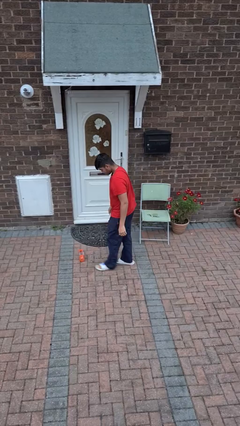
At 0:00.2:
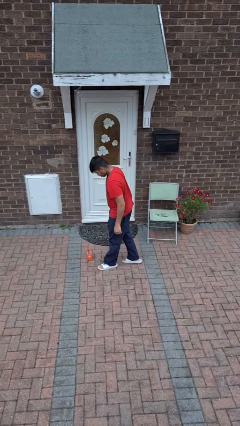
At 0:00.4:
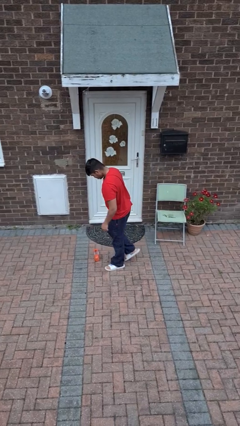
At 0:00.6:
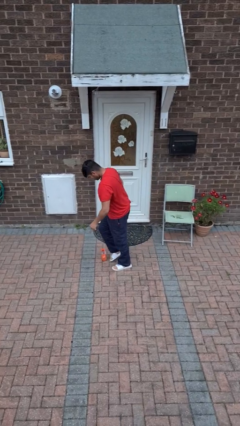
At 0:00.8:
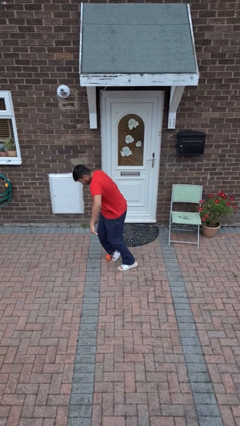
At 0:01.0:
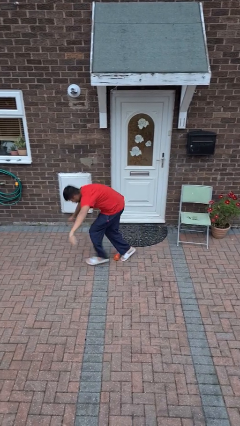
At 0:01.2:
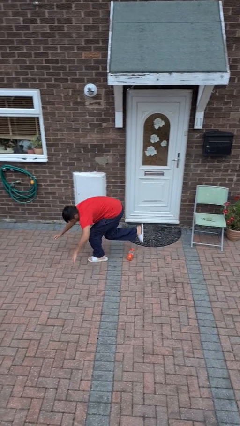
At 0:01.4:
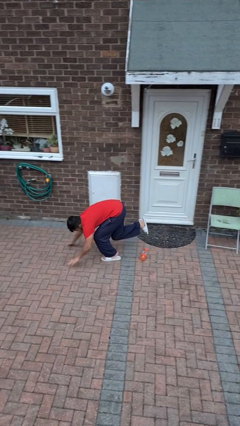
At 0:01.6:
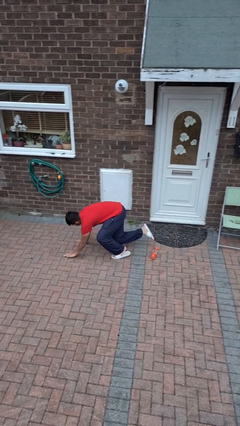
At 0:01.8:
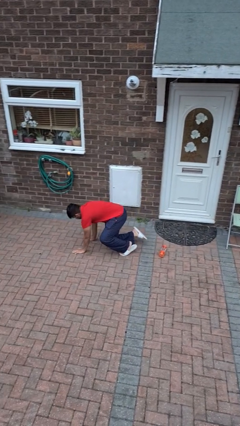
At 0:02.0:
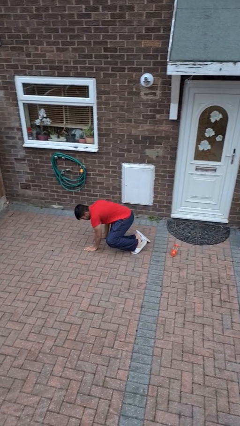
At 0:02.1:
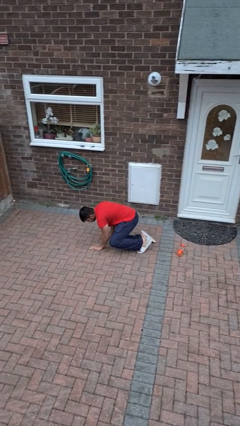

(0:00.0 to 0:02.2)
person trips on object on floor

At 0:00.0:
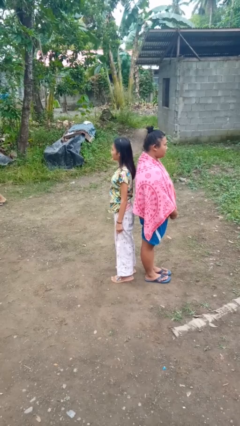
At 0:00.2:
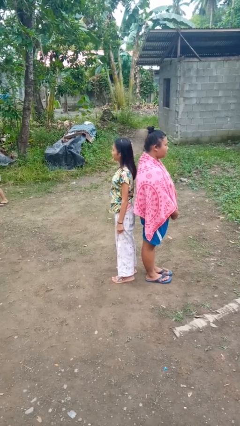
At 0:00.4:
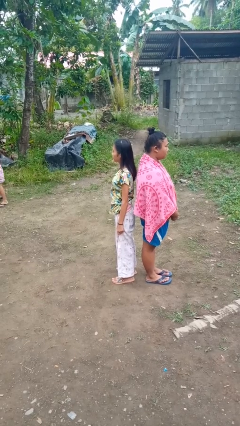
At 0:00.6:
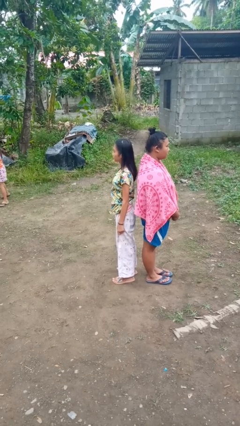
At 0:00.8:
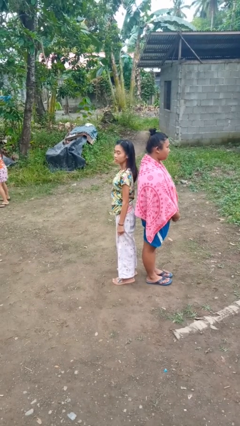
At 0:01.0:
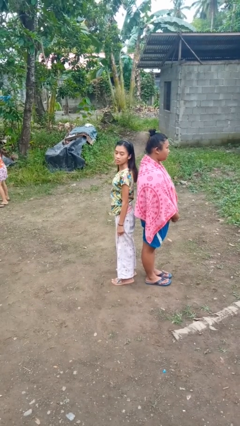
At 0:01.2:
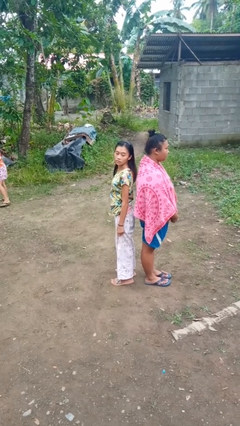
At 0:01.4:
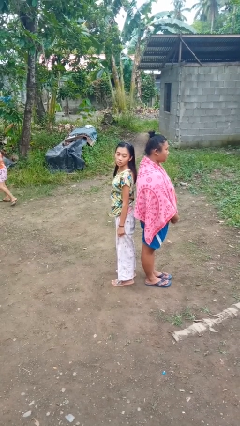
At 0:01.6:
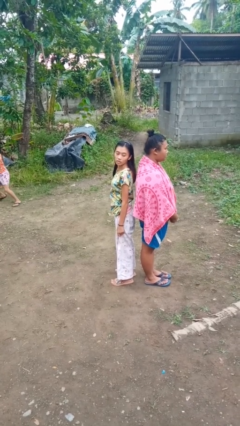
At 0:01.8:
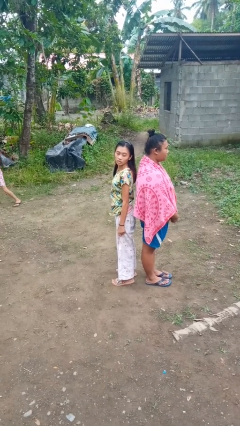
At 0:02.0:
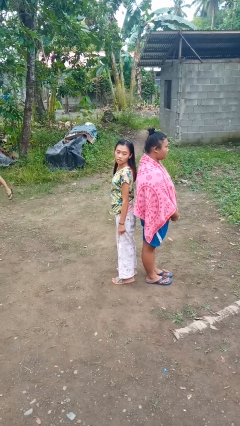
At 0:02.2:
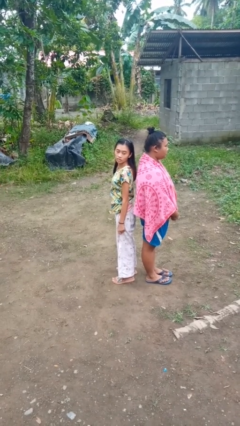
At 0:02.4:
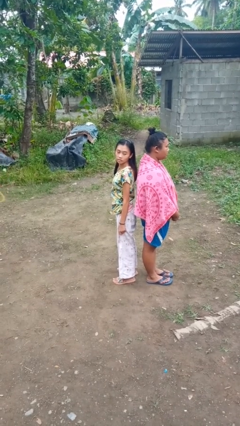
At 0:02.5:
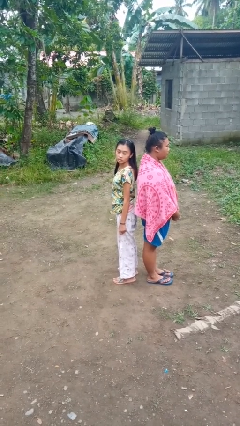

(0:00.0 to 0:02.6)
person looks over shoulder

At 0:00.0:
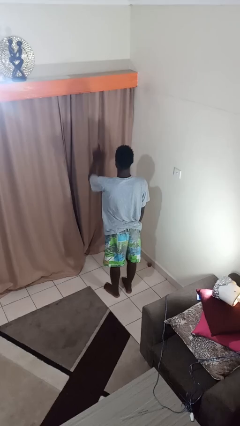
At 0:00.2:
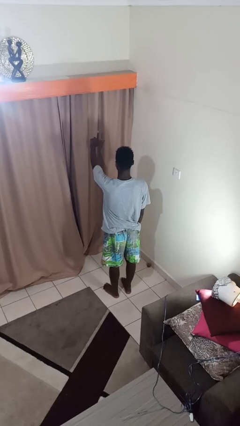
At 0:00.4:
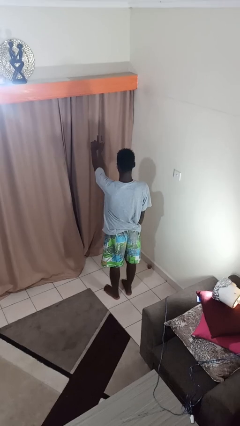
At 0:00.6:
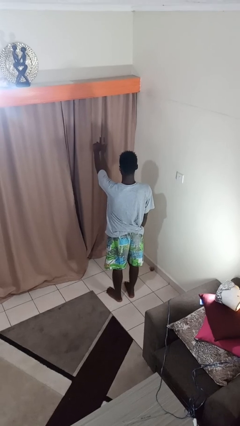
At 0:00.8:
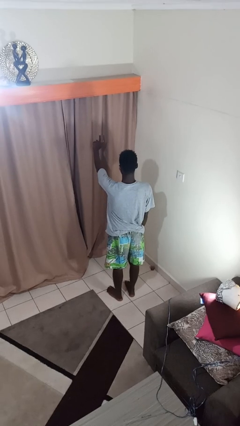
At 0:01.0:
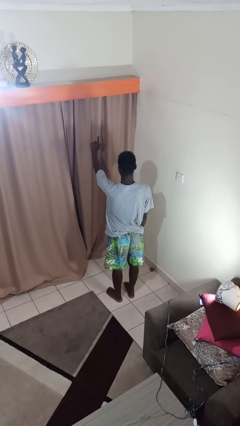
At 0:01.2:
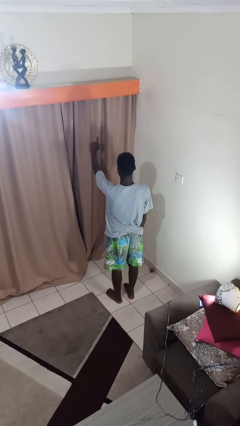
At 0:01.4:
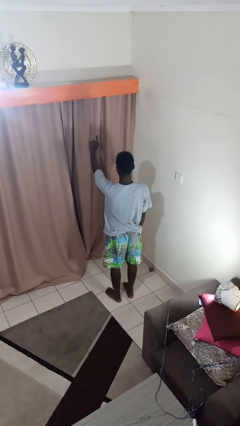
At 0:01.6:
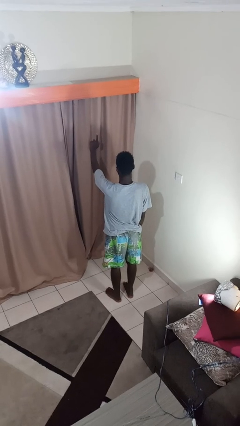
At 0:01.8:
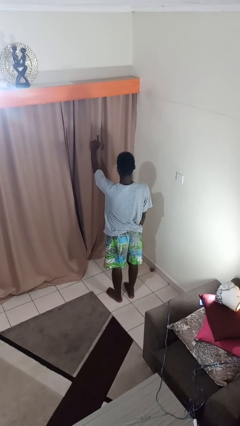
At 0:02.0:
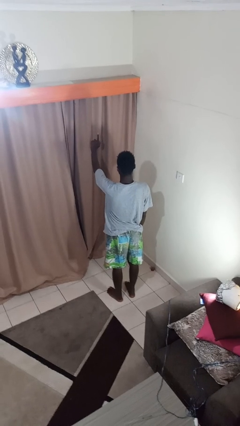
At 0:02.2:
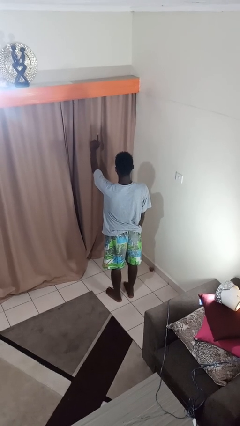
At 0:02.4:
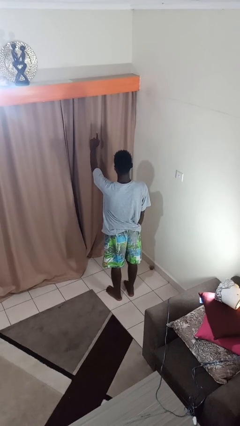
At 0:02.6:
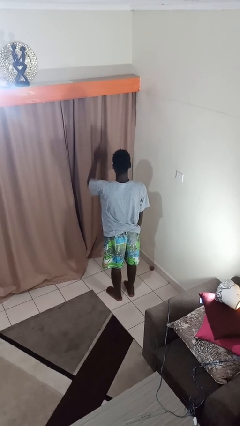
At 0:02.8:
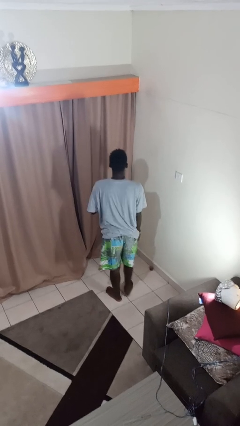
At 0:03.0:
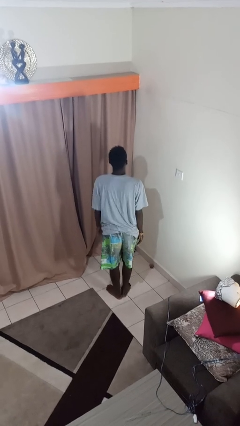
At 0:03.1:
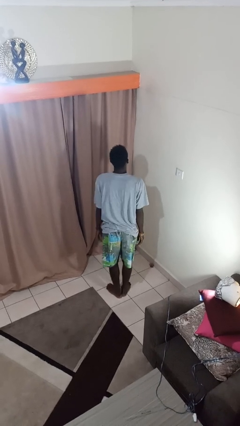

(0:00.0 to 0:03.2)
person gestures number one

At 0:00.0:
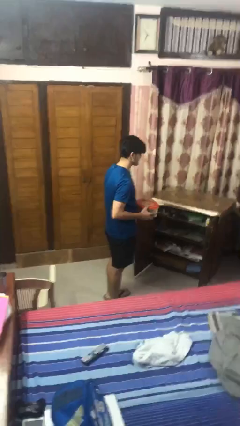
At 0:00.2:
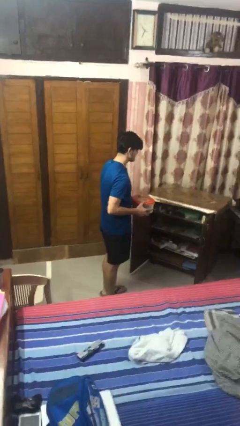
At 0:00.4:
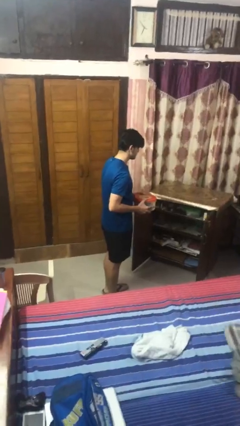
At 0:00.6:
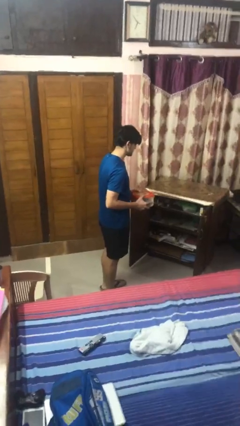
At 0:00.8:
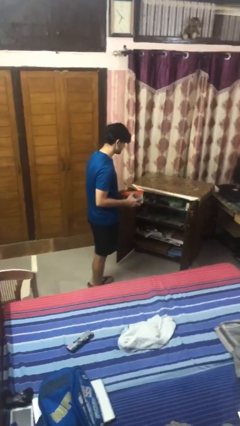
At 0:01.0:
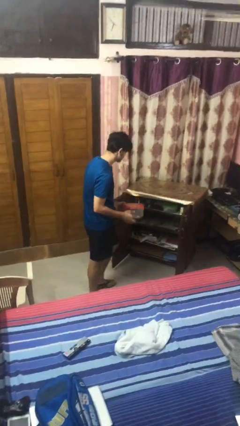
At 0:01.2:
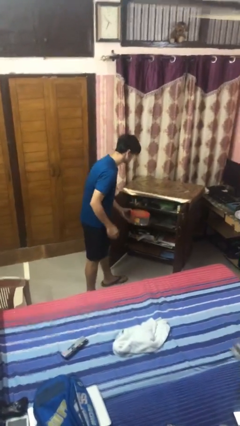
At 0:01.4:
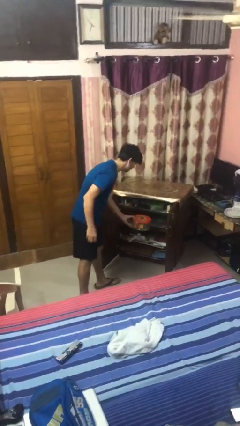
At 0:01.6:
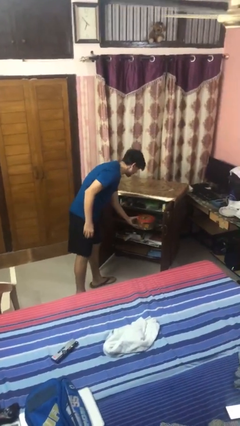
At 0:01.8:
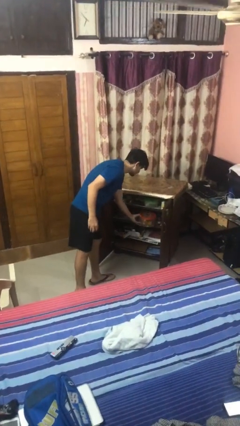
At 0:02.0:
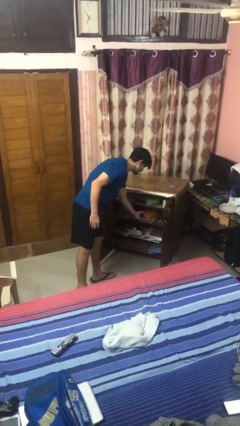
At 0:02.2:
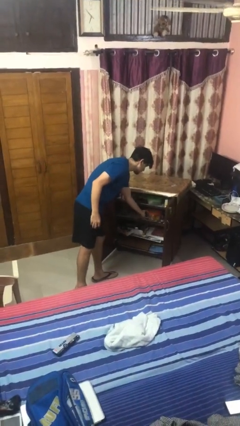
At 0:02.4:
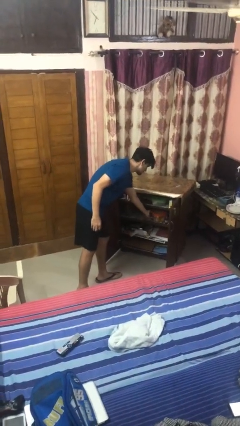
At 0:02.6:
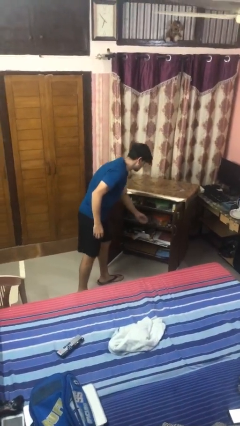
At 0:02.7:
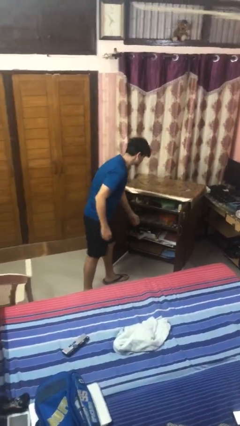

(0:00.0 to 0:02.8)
person puts down object into cabinet

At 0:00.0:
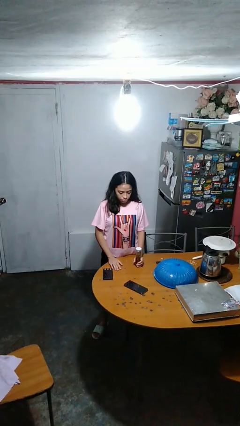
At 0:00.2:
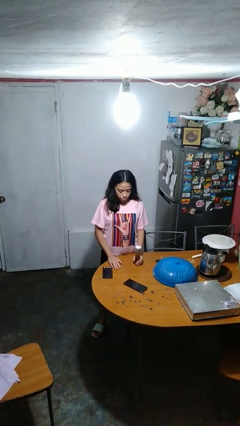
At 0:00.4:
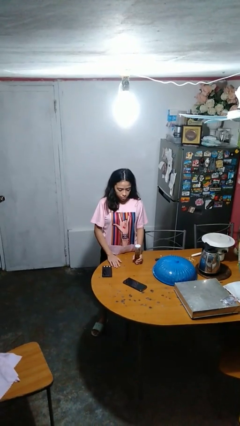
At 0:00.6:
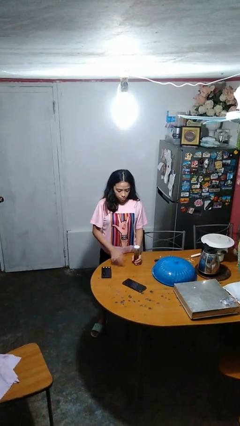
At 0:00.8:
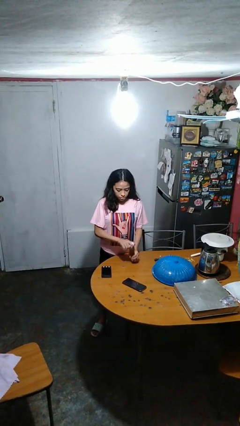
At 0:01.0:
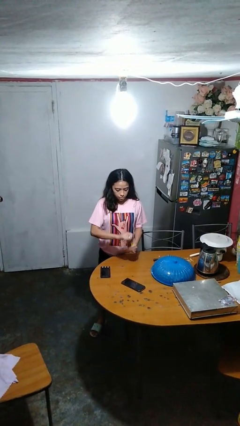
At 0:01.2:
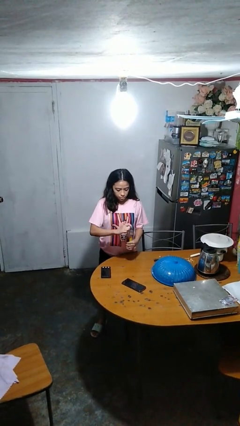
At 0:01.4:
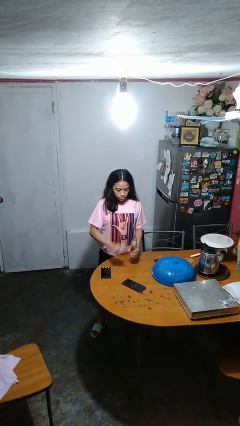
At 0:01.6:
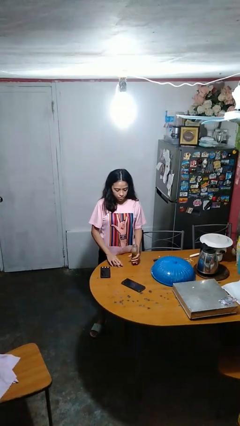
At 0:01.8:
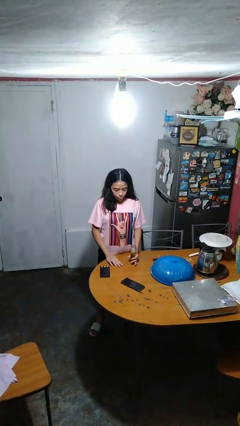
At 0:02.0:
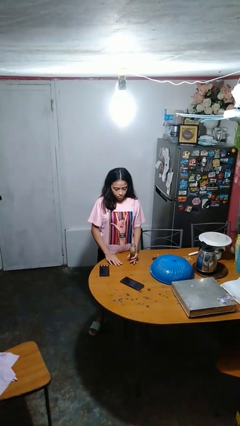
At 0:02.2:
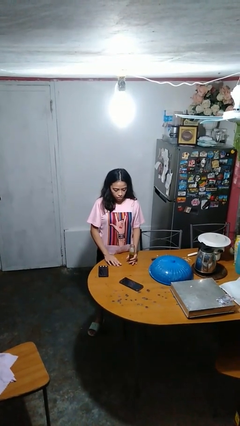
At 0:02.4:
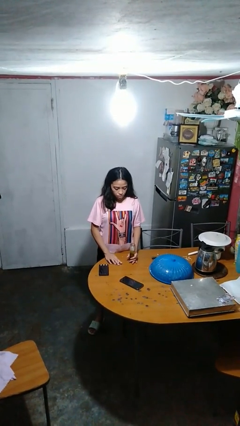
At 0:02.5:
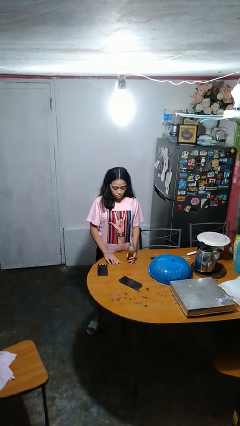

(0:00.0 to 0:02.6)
person opens jar

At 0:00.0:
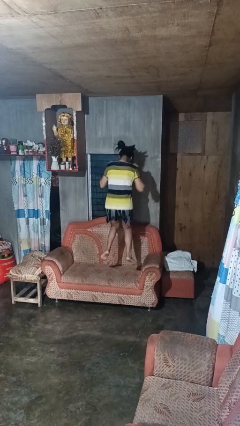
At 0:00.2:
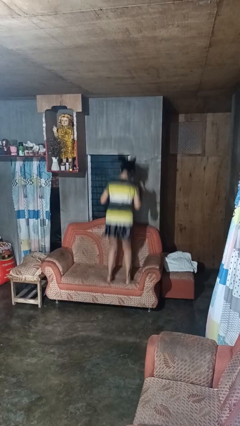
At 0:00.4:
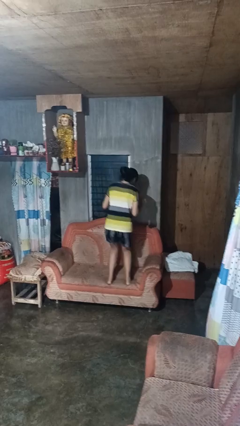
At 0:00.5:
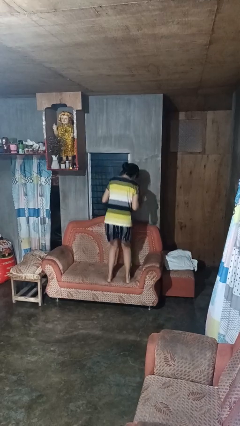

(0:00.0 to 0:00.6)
person jumps on couch

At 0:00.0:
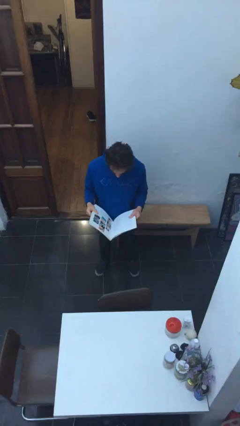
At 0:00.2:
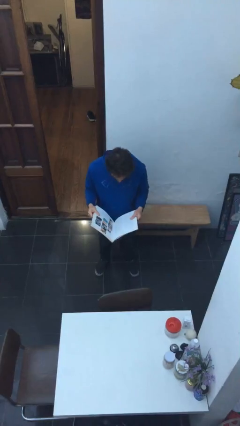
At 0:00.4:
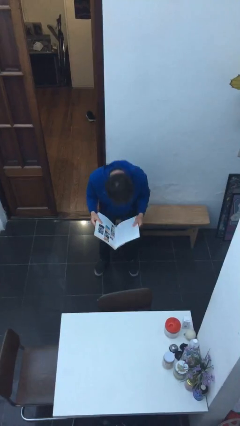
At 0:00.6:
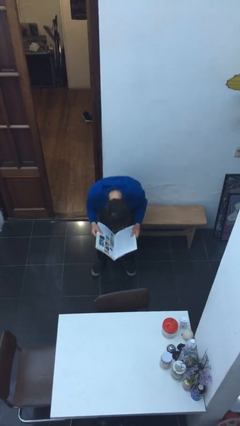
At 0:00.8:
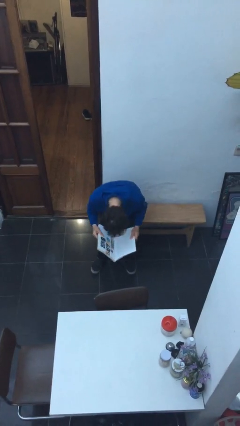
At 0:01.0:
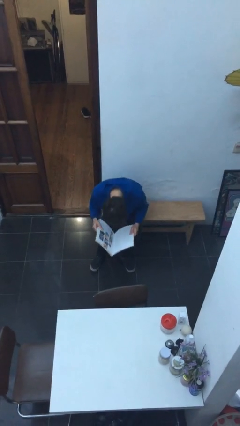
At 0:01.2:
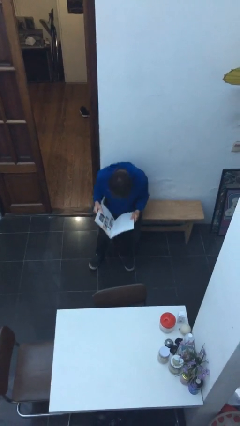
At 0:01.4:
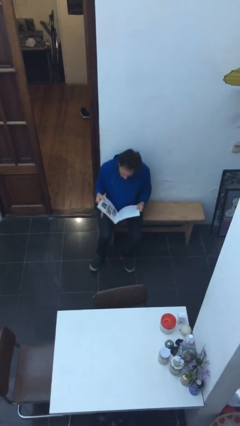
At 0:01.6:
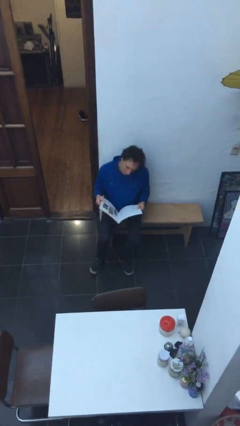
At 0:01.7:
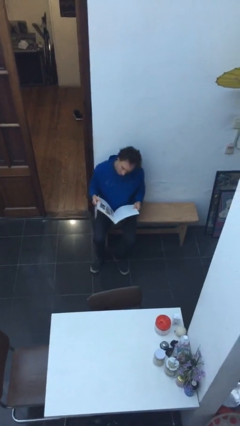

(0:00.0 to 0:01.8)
person sits down

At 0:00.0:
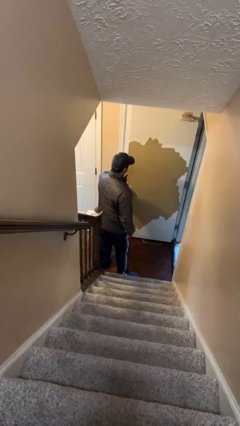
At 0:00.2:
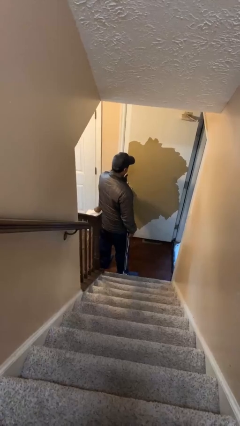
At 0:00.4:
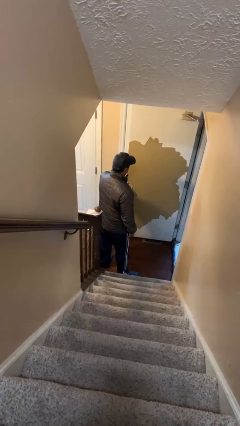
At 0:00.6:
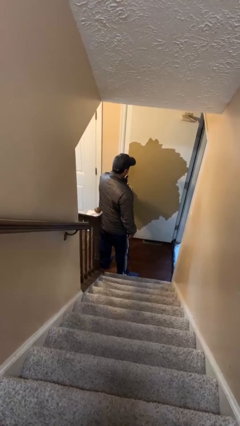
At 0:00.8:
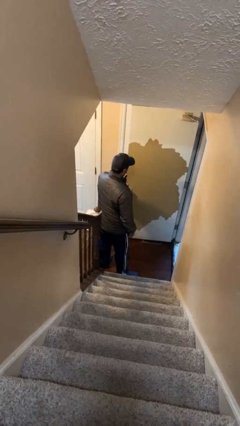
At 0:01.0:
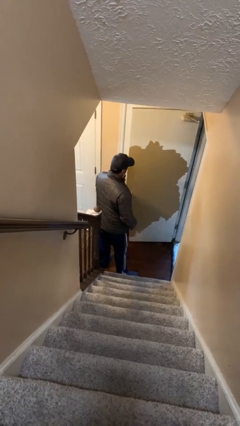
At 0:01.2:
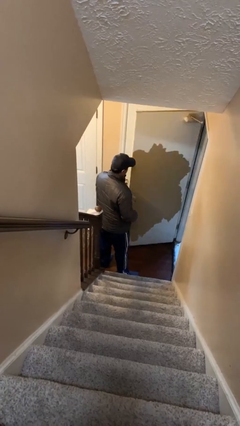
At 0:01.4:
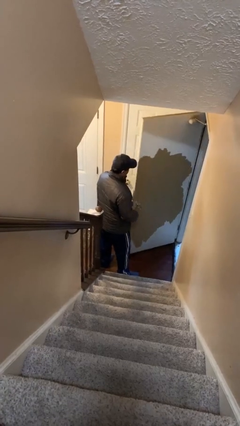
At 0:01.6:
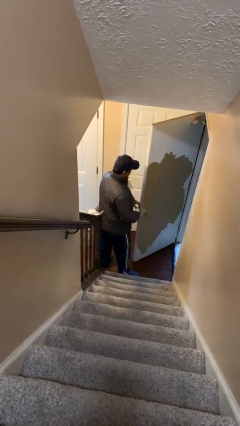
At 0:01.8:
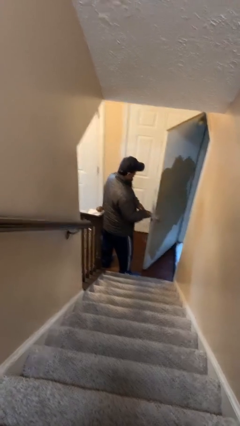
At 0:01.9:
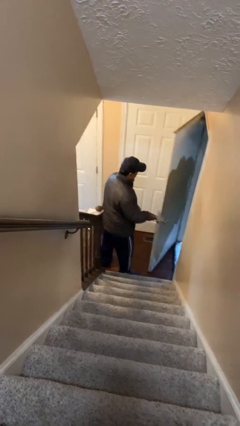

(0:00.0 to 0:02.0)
person closes facility door
